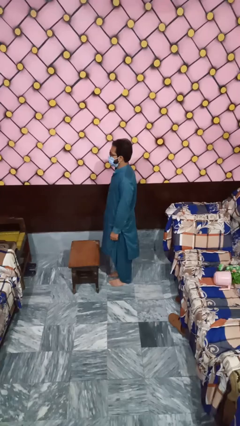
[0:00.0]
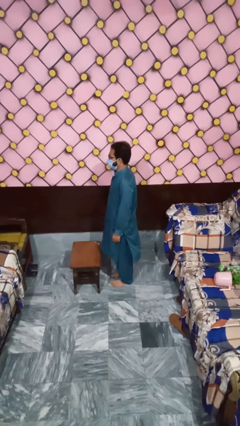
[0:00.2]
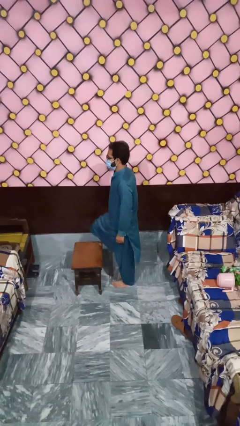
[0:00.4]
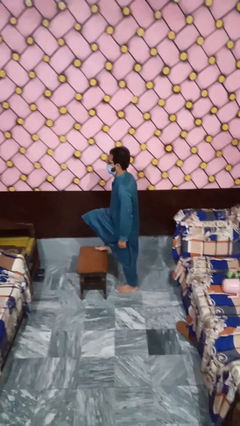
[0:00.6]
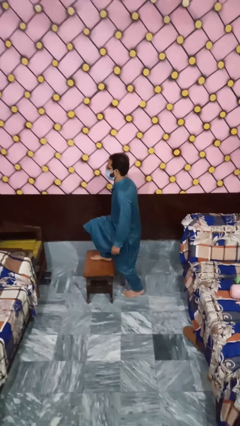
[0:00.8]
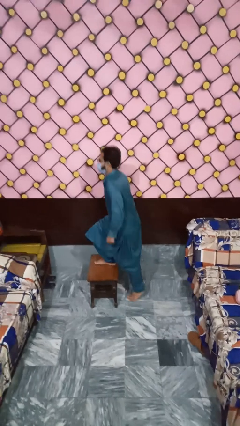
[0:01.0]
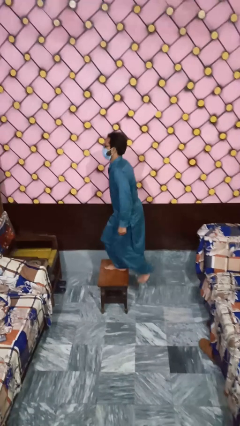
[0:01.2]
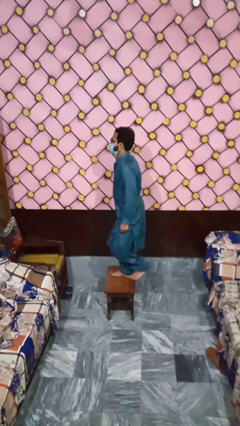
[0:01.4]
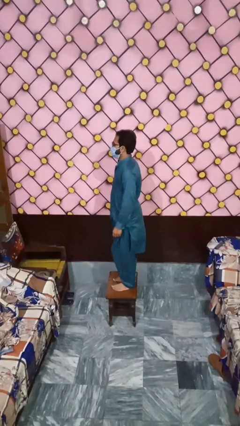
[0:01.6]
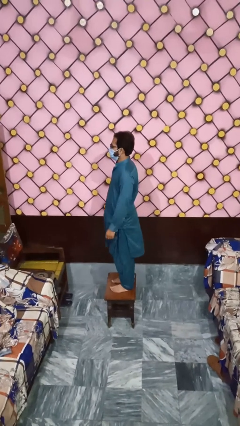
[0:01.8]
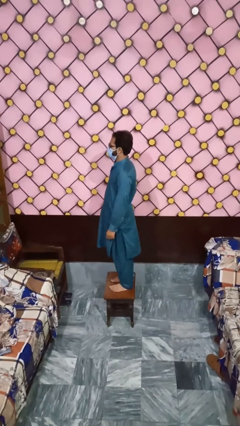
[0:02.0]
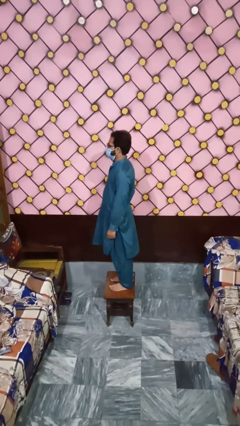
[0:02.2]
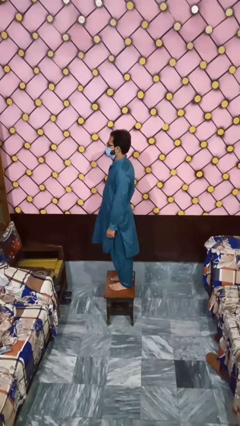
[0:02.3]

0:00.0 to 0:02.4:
person climbs on table

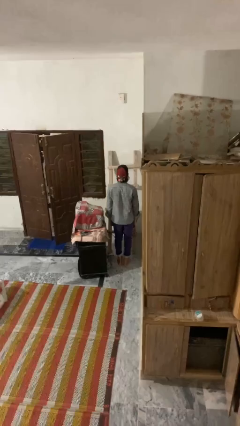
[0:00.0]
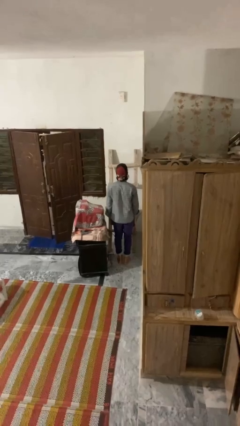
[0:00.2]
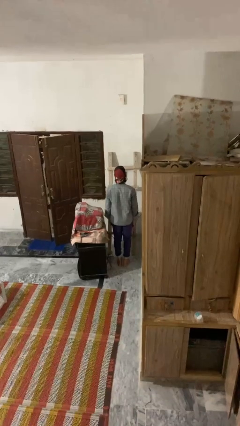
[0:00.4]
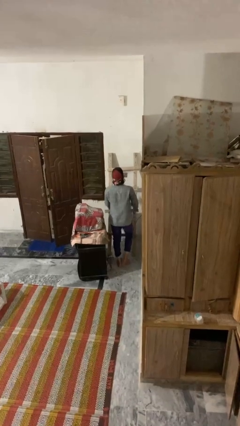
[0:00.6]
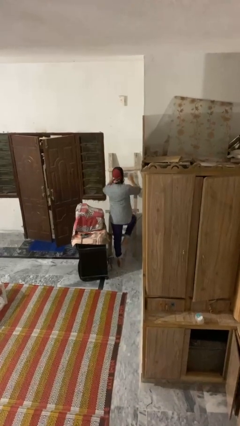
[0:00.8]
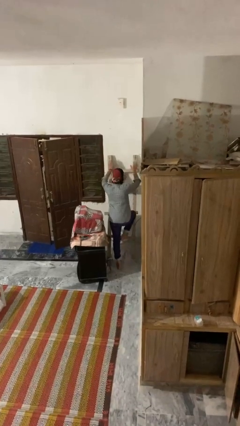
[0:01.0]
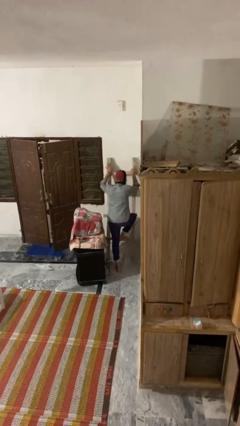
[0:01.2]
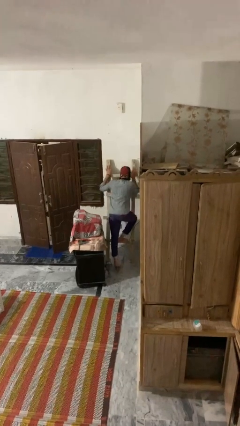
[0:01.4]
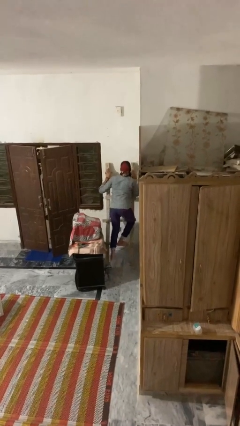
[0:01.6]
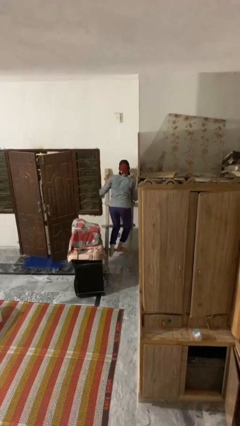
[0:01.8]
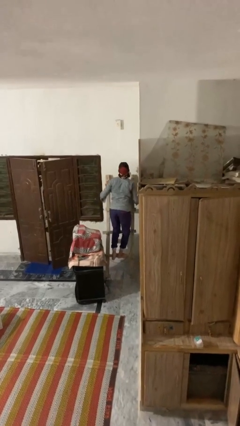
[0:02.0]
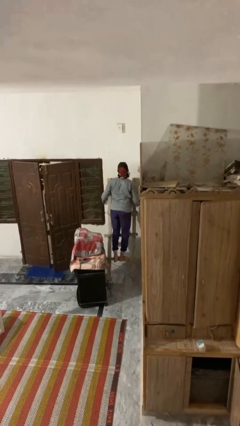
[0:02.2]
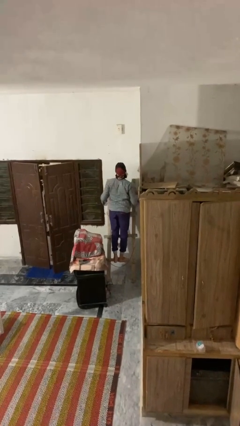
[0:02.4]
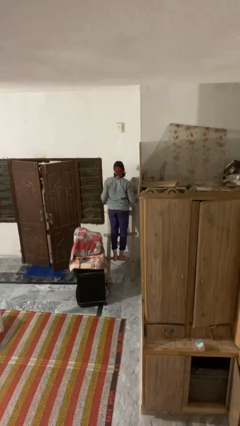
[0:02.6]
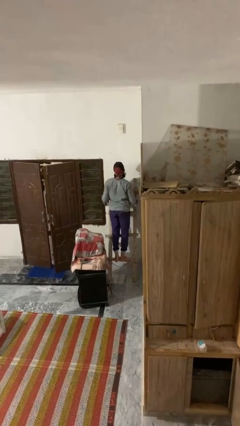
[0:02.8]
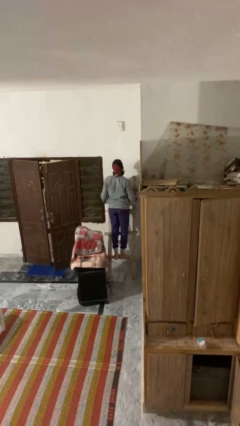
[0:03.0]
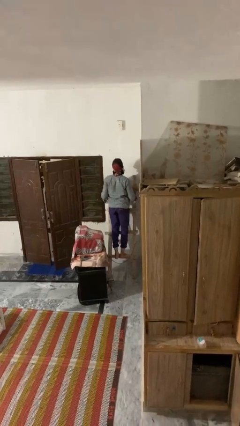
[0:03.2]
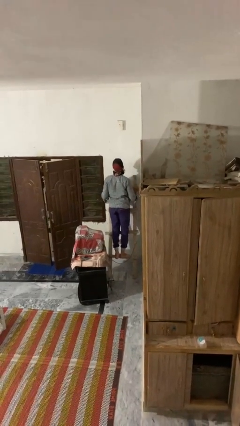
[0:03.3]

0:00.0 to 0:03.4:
person climbs up ladder

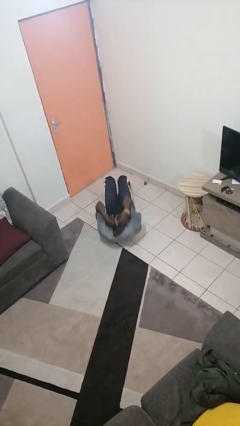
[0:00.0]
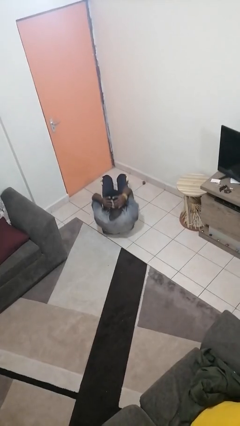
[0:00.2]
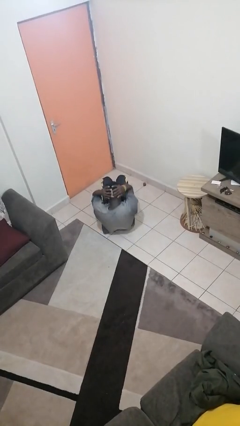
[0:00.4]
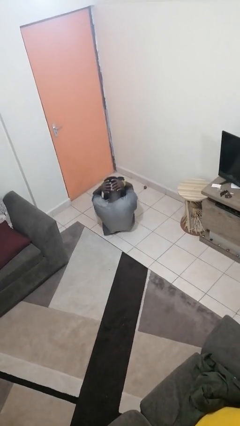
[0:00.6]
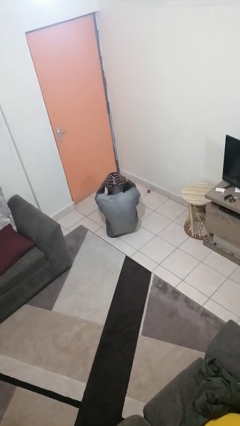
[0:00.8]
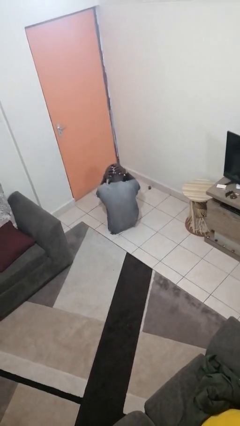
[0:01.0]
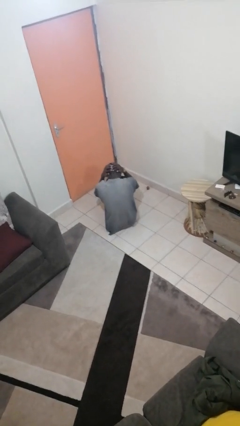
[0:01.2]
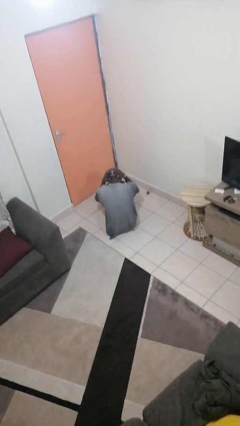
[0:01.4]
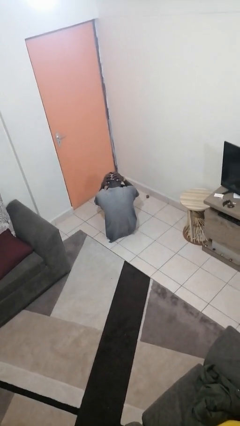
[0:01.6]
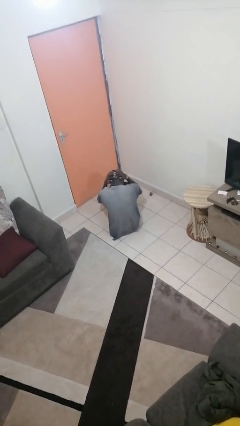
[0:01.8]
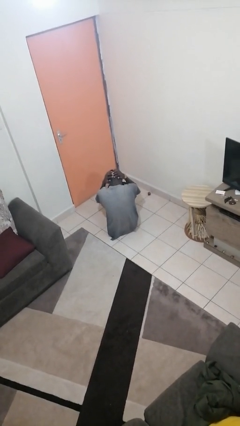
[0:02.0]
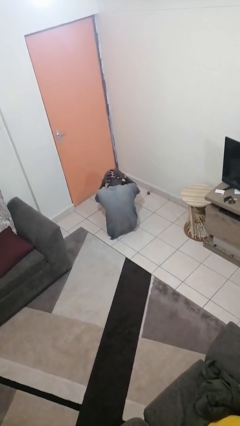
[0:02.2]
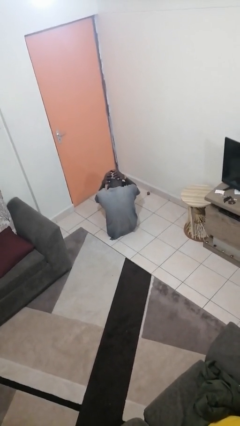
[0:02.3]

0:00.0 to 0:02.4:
person exercises with situp

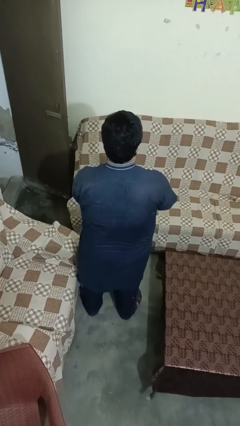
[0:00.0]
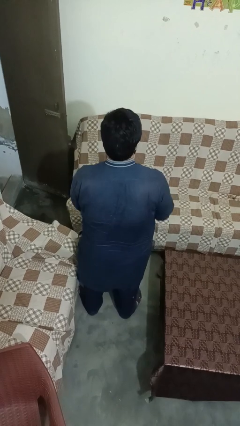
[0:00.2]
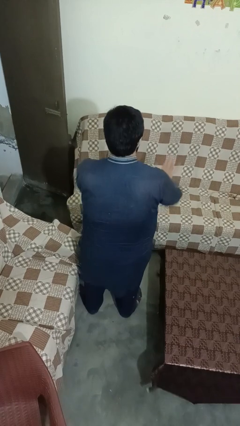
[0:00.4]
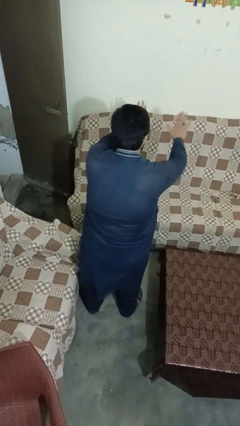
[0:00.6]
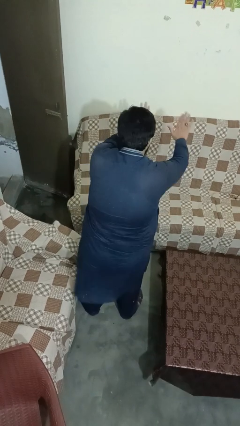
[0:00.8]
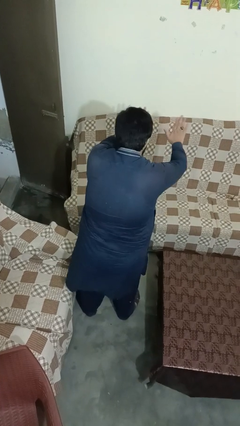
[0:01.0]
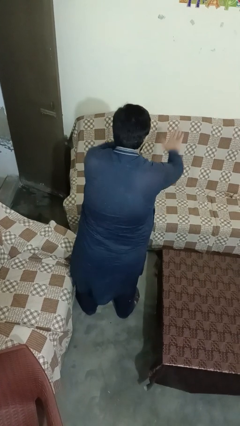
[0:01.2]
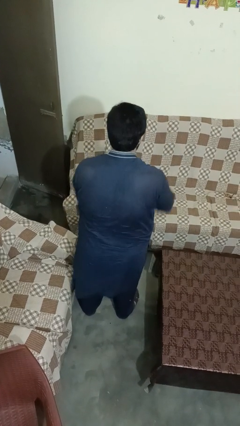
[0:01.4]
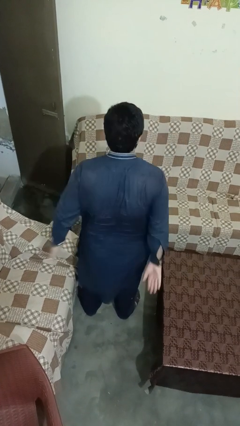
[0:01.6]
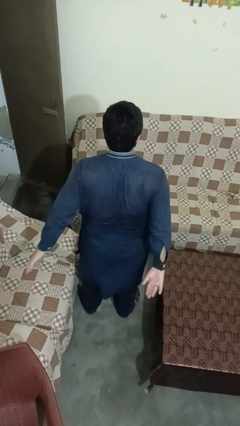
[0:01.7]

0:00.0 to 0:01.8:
person gestures stop

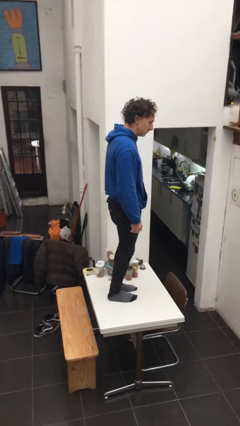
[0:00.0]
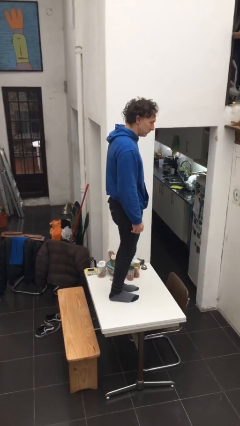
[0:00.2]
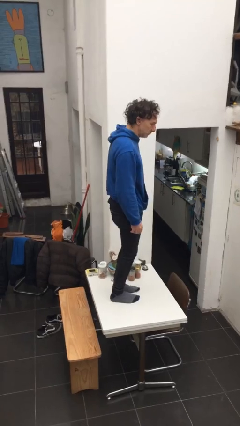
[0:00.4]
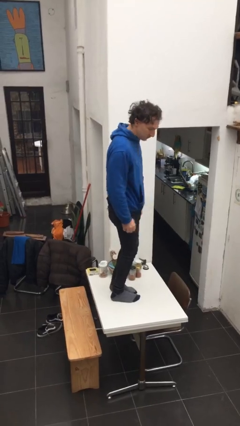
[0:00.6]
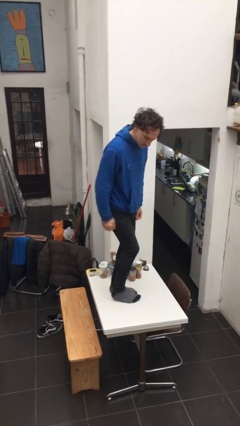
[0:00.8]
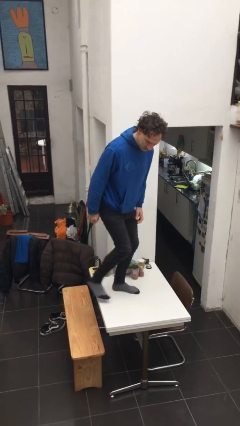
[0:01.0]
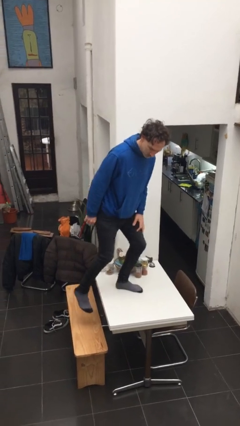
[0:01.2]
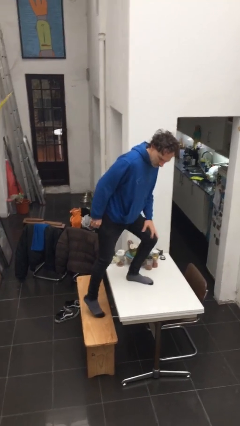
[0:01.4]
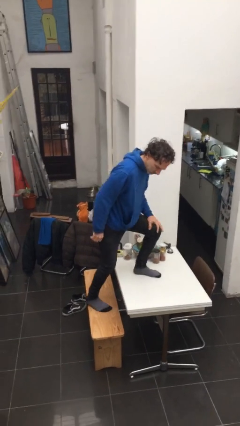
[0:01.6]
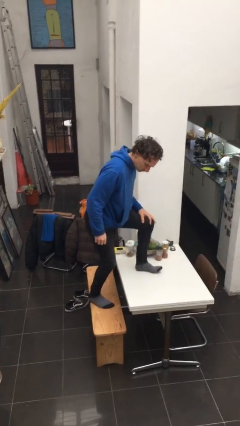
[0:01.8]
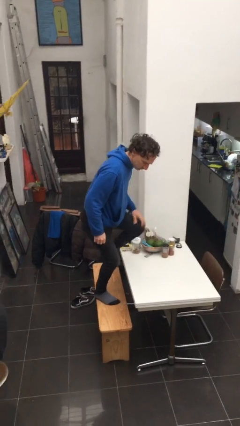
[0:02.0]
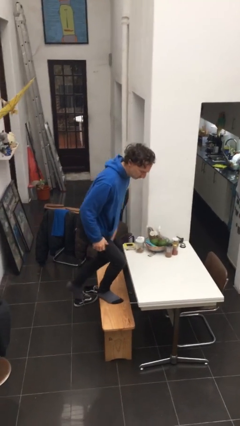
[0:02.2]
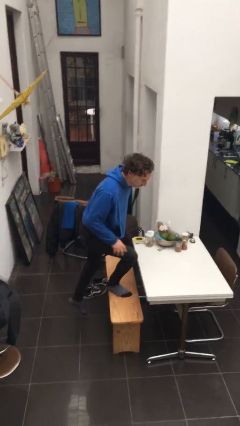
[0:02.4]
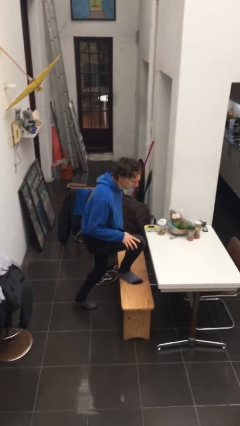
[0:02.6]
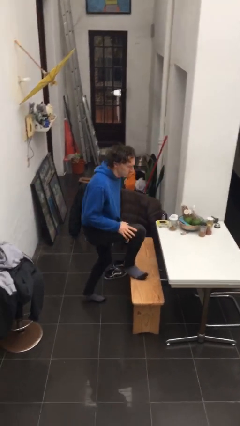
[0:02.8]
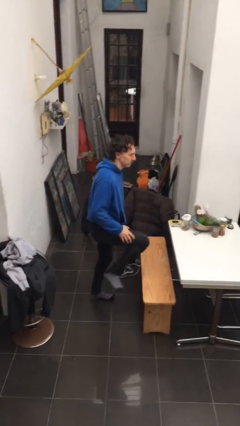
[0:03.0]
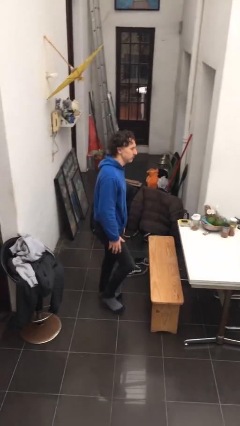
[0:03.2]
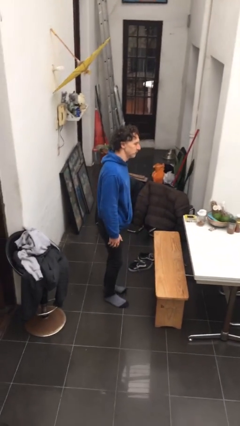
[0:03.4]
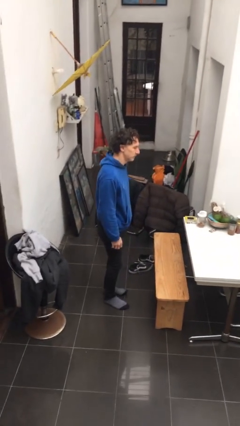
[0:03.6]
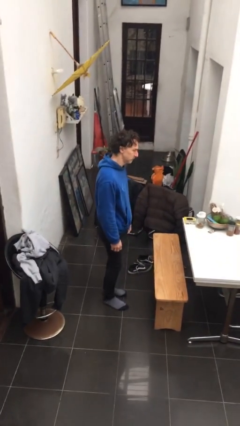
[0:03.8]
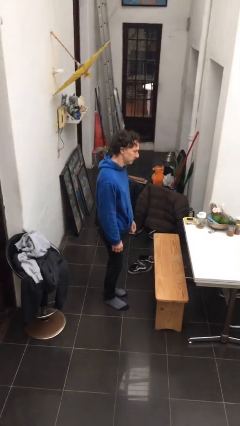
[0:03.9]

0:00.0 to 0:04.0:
person climbs off table

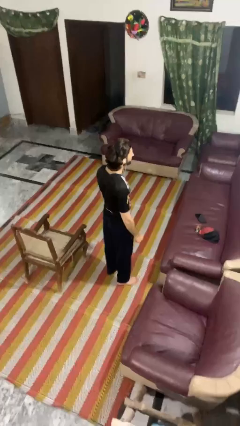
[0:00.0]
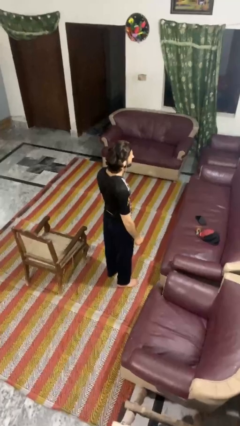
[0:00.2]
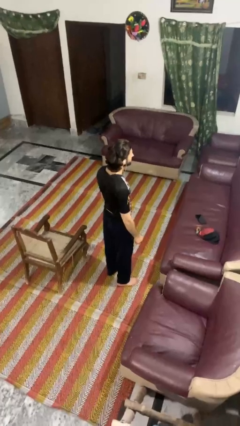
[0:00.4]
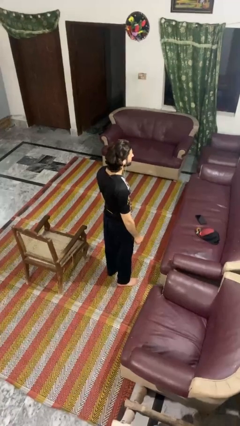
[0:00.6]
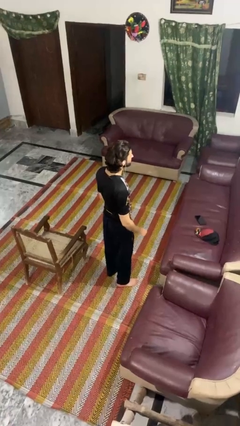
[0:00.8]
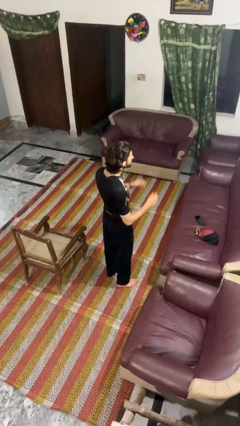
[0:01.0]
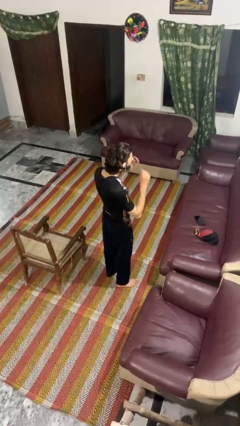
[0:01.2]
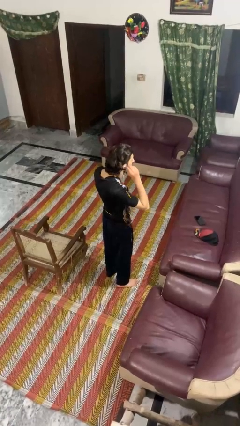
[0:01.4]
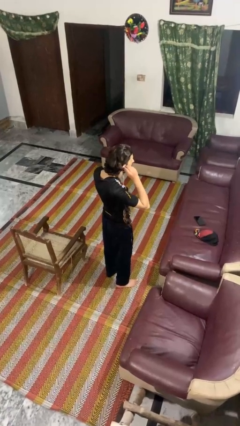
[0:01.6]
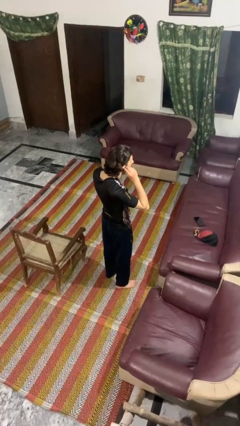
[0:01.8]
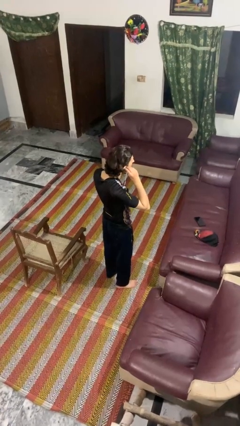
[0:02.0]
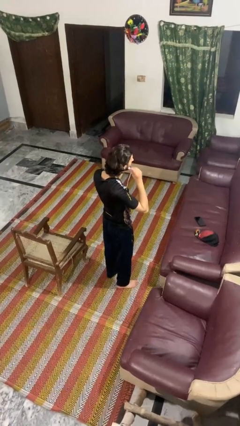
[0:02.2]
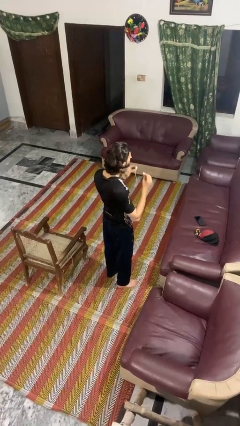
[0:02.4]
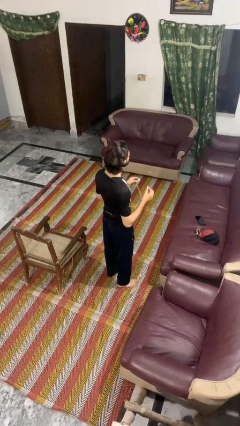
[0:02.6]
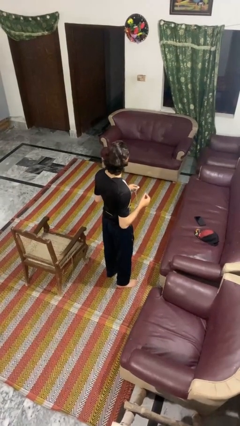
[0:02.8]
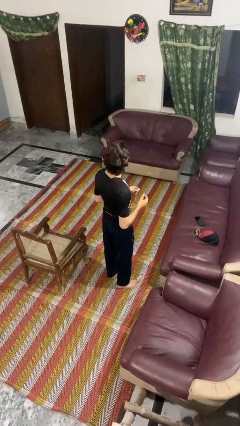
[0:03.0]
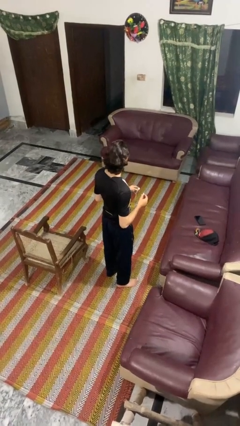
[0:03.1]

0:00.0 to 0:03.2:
person takes off headphones

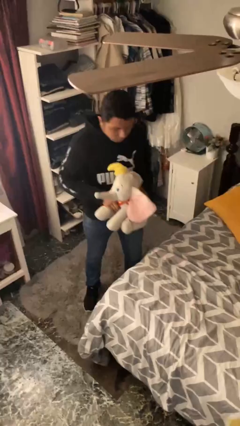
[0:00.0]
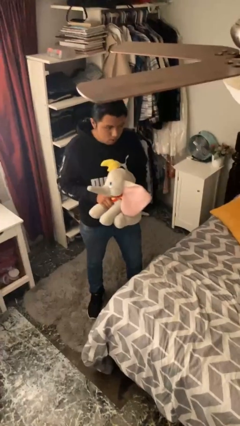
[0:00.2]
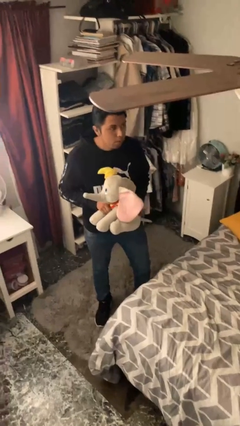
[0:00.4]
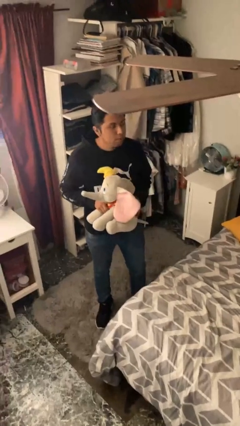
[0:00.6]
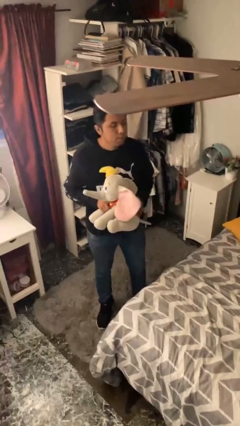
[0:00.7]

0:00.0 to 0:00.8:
person picks up object from bed
